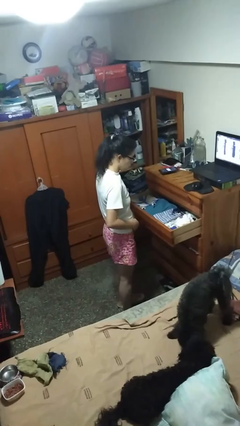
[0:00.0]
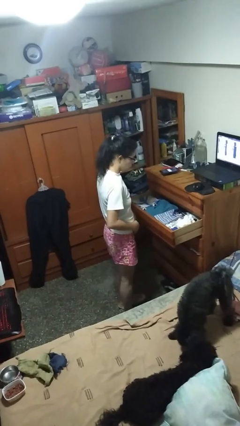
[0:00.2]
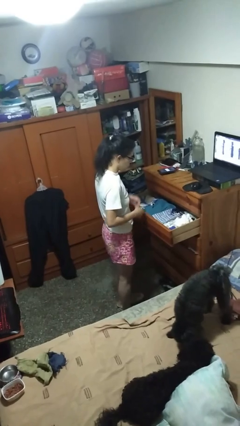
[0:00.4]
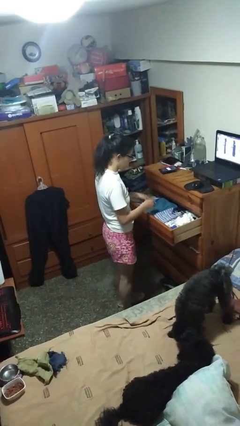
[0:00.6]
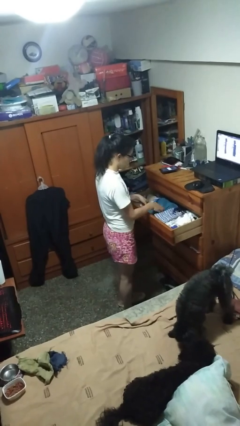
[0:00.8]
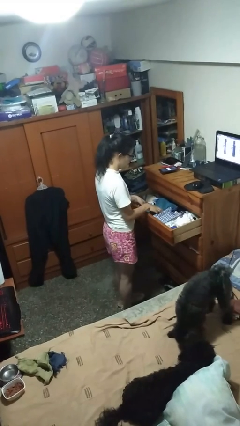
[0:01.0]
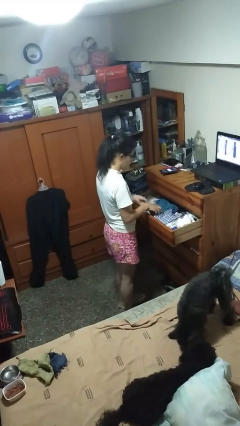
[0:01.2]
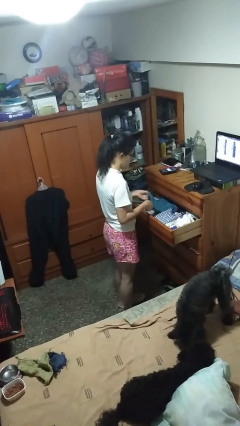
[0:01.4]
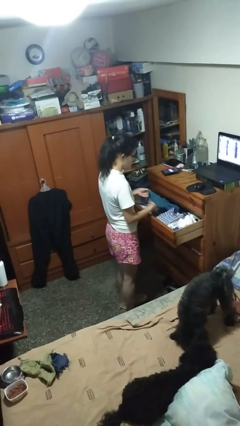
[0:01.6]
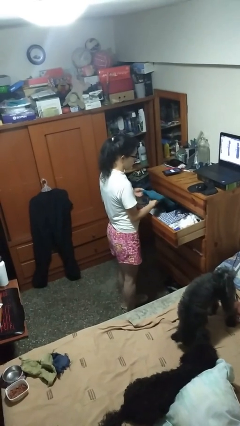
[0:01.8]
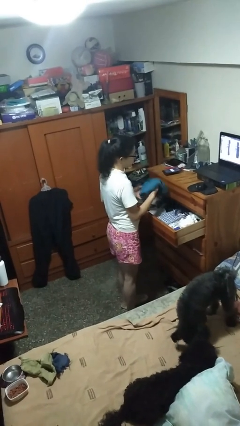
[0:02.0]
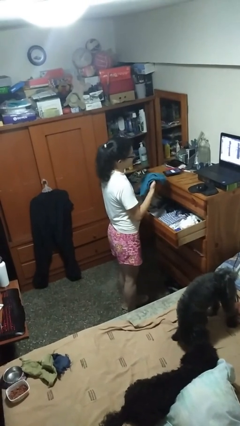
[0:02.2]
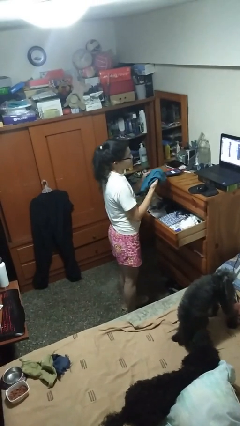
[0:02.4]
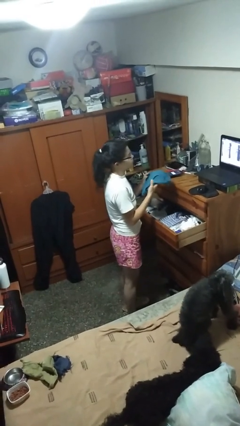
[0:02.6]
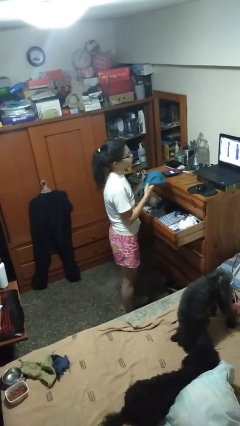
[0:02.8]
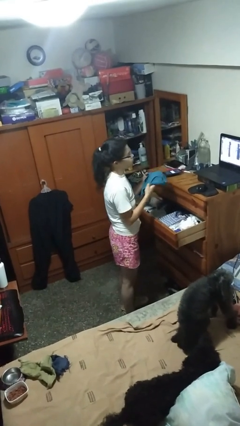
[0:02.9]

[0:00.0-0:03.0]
person takes clothes from dresser

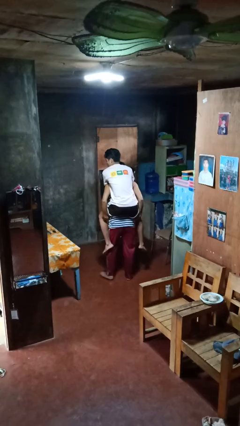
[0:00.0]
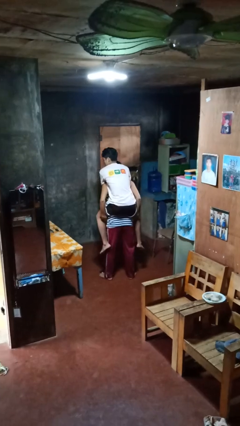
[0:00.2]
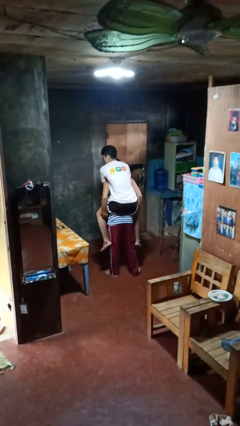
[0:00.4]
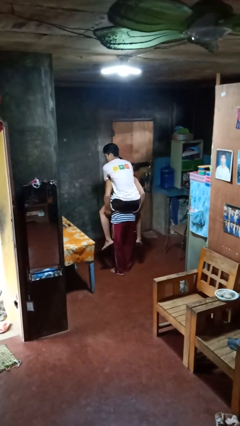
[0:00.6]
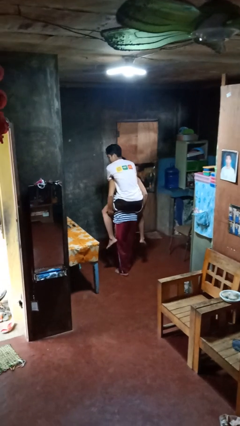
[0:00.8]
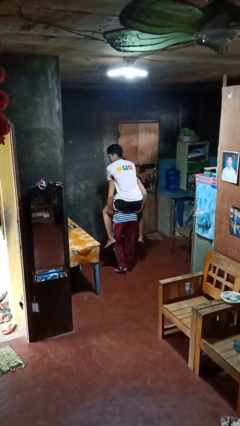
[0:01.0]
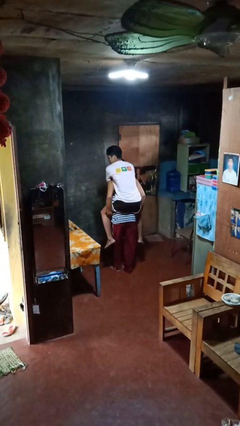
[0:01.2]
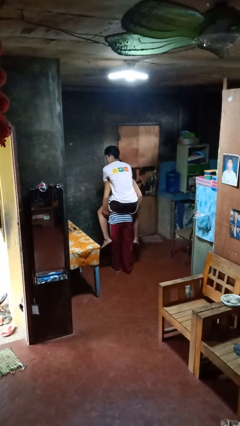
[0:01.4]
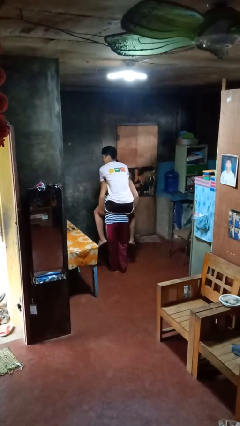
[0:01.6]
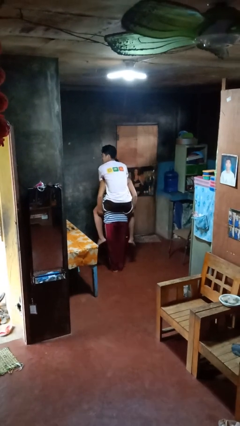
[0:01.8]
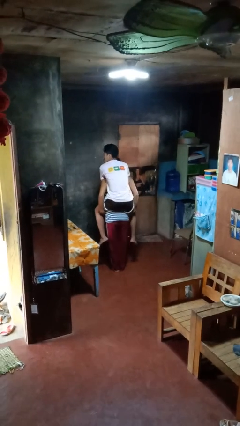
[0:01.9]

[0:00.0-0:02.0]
person carries person on back

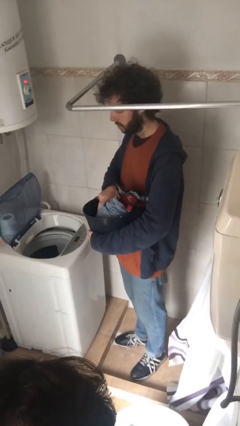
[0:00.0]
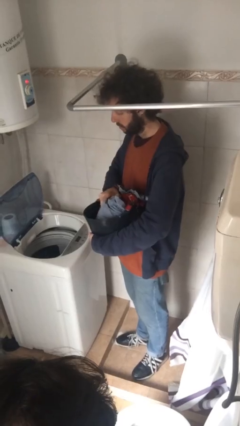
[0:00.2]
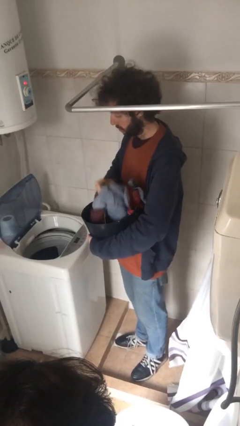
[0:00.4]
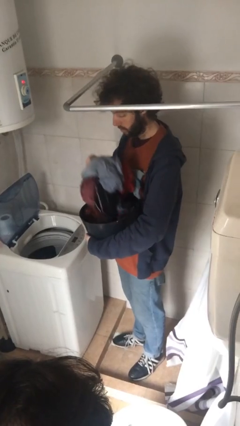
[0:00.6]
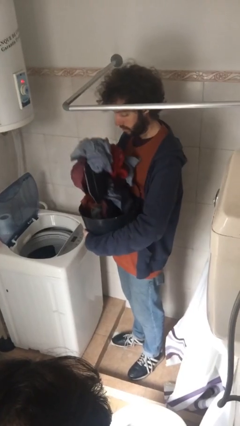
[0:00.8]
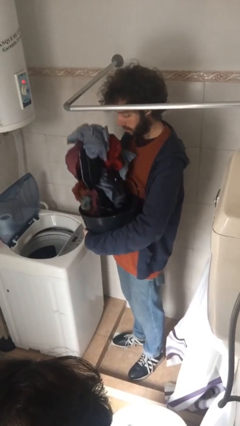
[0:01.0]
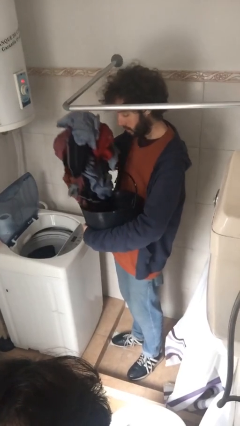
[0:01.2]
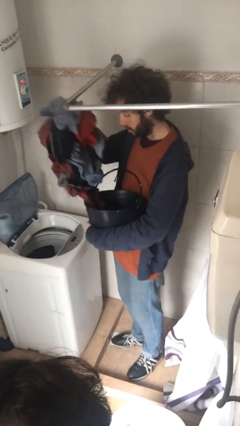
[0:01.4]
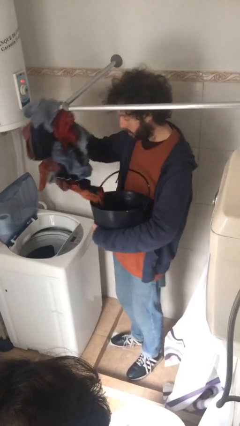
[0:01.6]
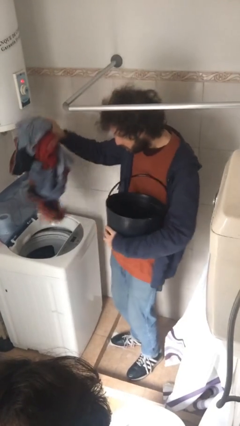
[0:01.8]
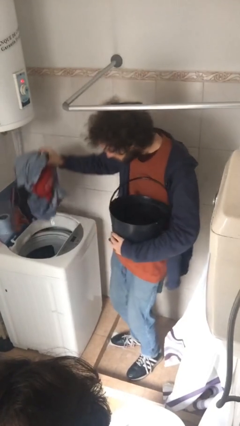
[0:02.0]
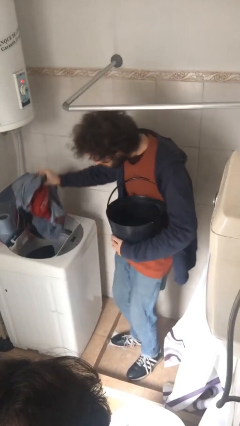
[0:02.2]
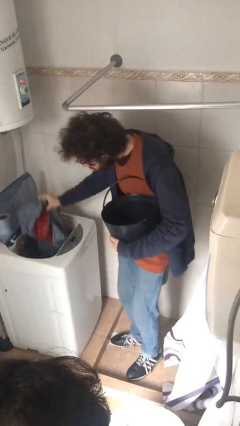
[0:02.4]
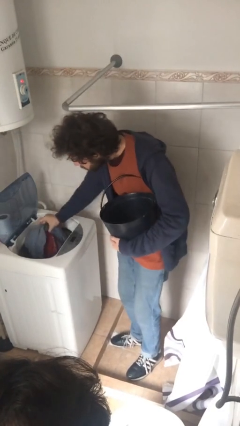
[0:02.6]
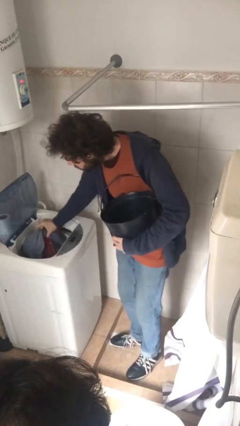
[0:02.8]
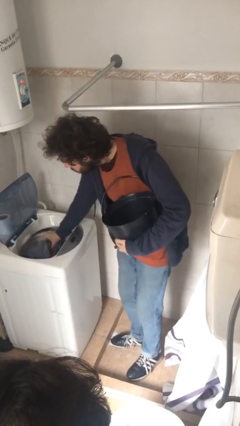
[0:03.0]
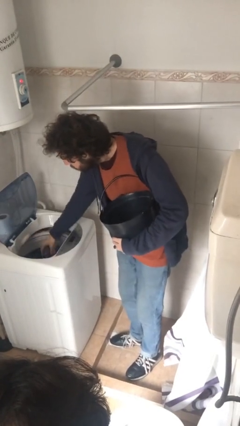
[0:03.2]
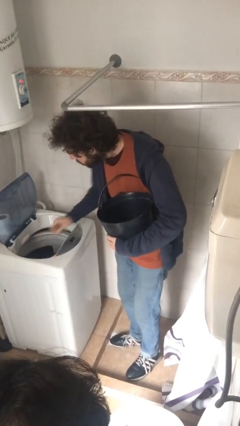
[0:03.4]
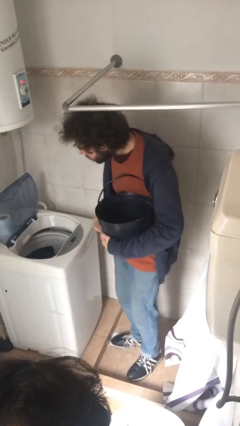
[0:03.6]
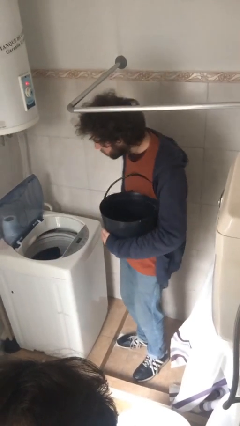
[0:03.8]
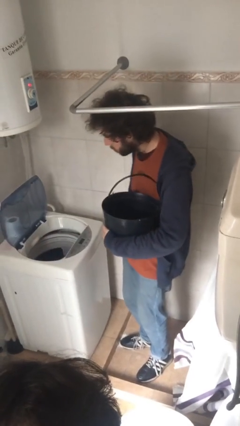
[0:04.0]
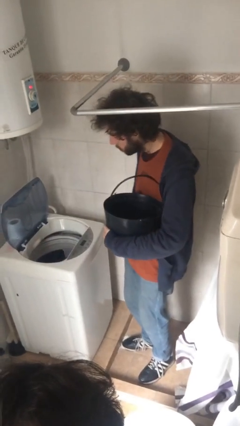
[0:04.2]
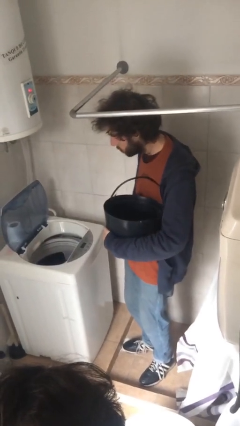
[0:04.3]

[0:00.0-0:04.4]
person loads clotheswasher

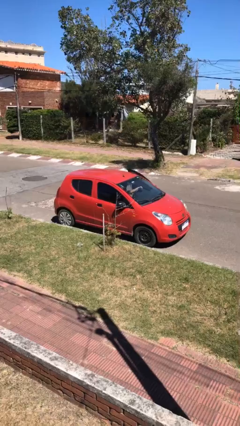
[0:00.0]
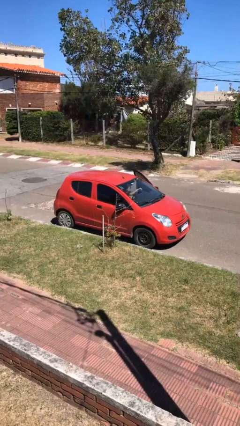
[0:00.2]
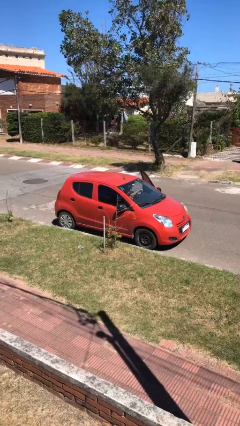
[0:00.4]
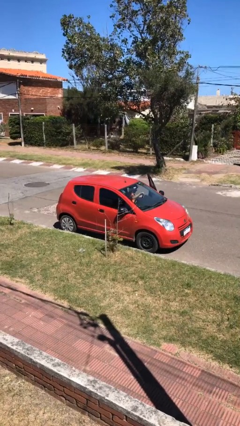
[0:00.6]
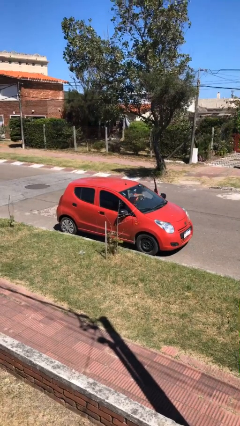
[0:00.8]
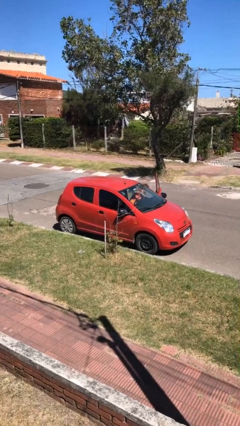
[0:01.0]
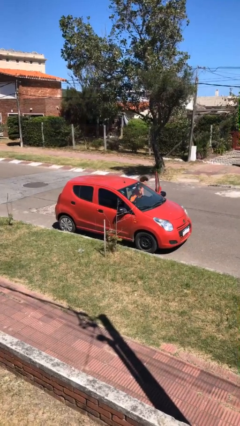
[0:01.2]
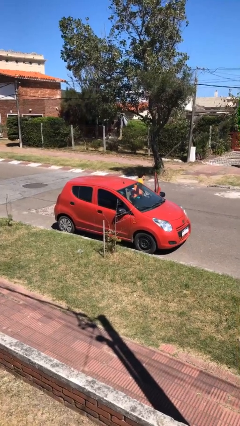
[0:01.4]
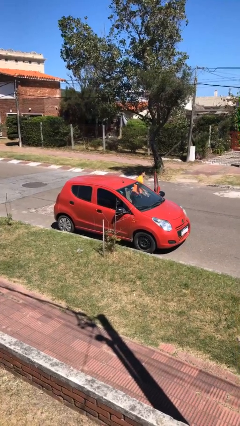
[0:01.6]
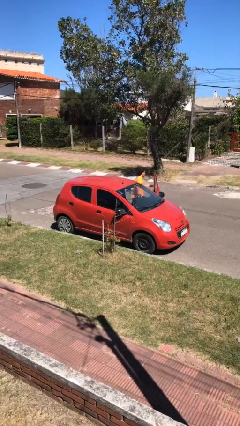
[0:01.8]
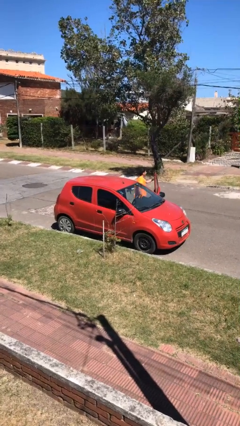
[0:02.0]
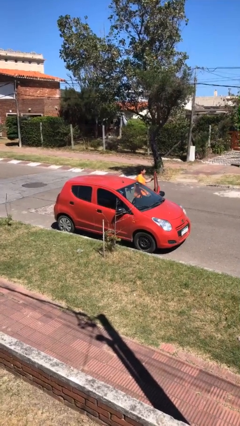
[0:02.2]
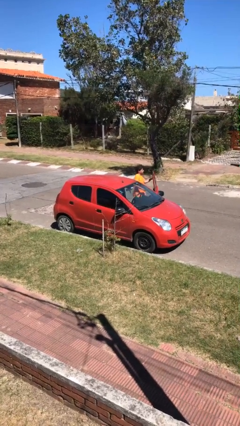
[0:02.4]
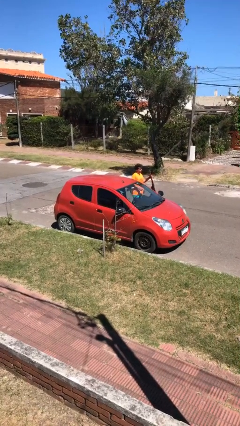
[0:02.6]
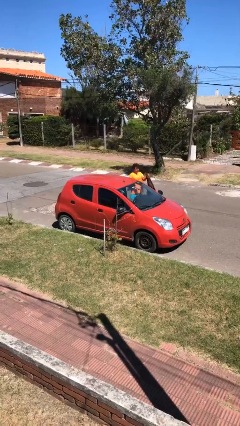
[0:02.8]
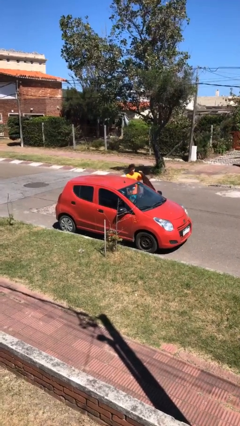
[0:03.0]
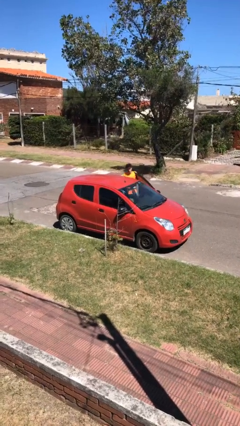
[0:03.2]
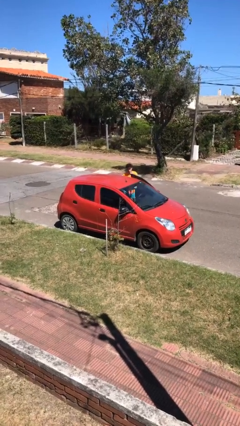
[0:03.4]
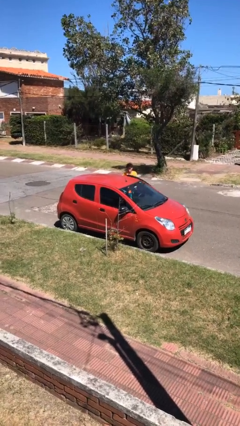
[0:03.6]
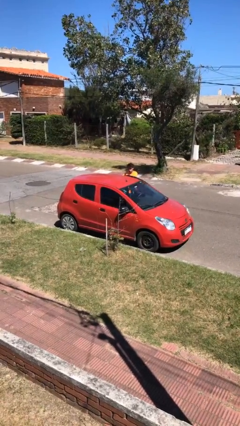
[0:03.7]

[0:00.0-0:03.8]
car drops off person

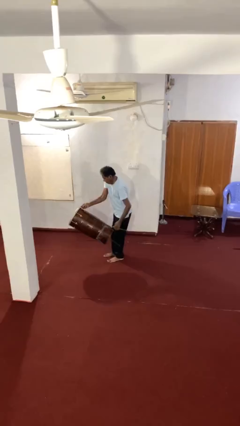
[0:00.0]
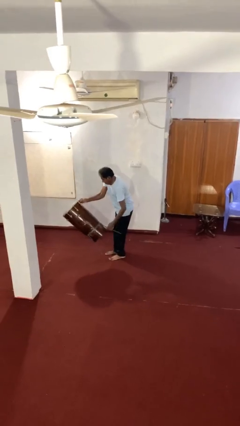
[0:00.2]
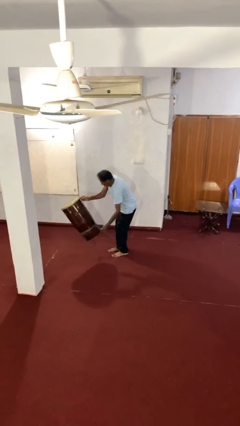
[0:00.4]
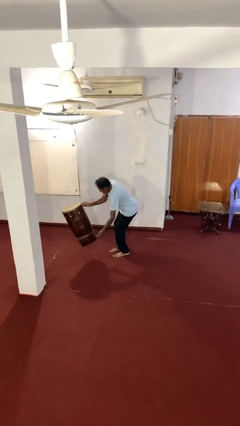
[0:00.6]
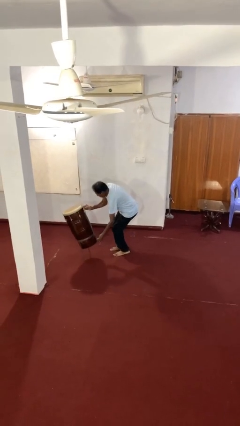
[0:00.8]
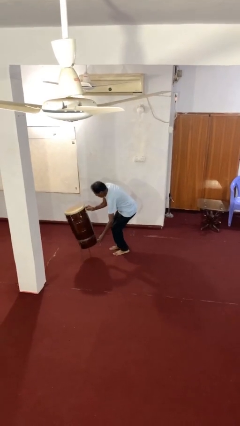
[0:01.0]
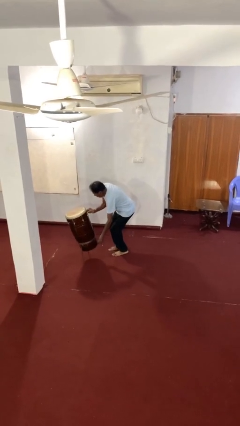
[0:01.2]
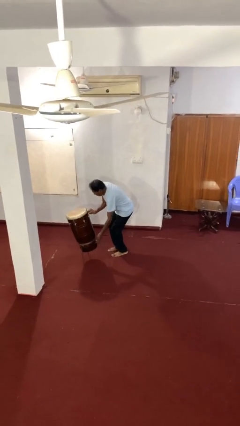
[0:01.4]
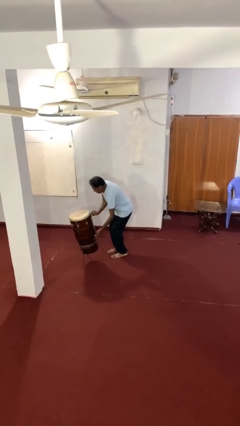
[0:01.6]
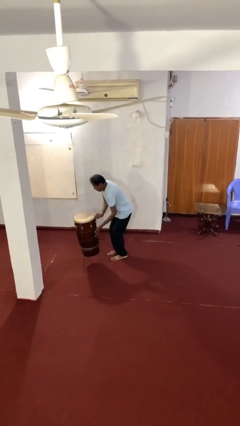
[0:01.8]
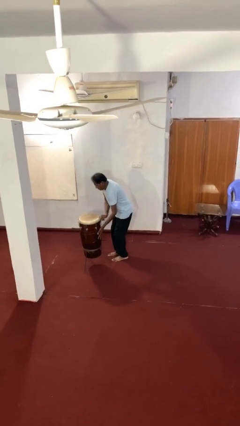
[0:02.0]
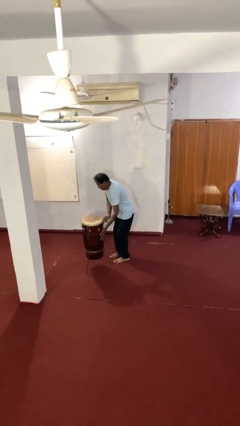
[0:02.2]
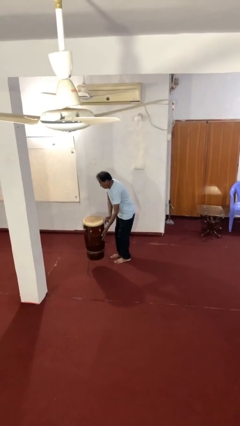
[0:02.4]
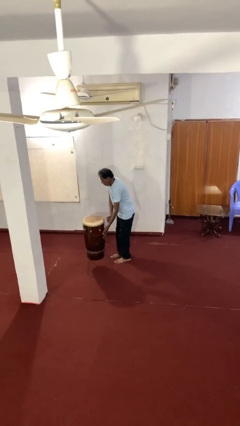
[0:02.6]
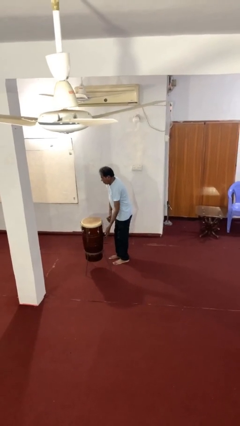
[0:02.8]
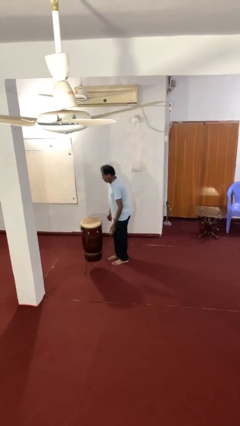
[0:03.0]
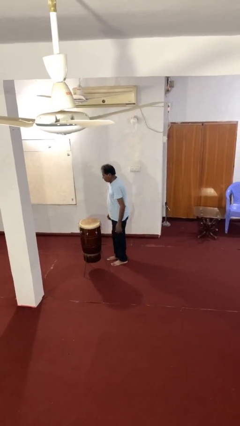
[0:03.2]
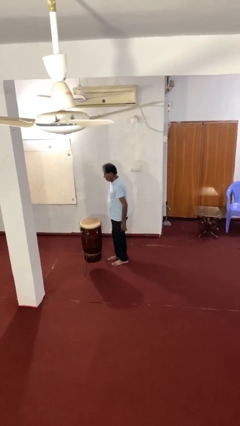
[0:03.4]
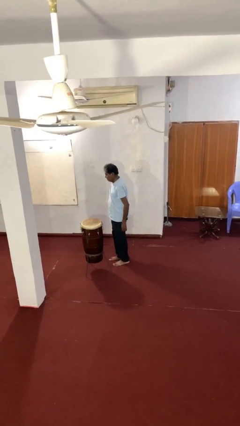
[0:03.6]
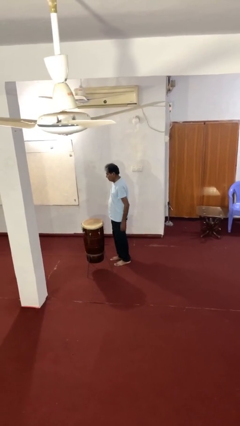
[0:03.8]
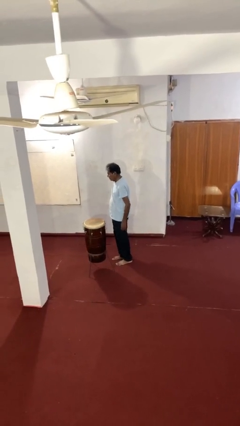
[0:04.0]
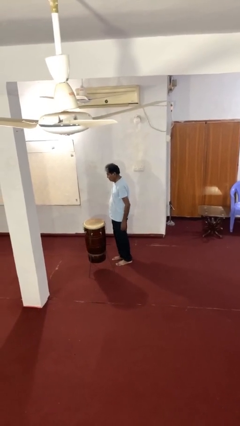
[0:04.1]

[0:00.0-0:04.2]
person puts down object on floor
